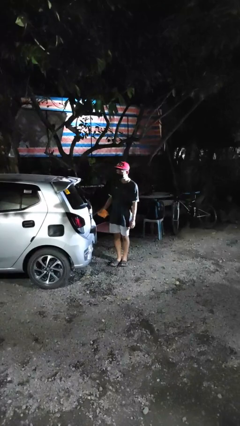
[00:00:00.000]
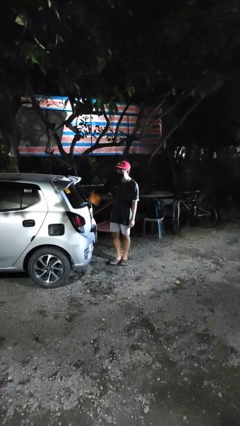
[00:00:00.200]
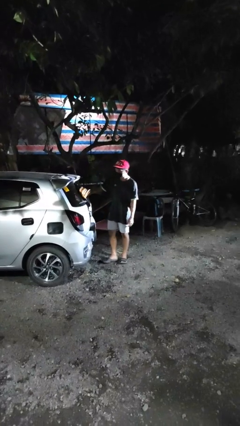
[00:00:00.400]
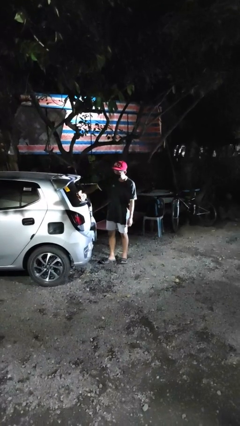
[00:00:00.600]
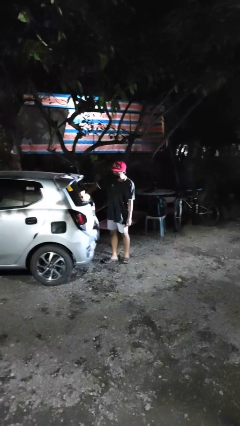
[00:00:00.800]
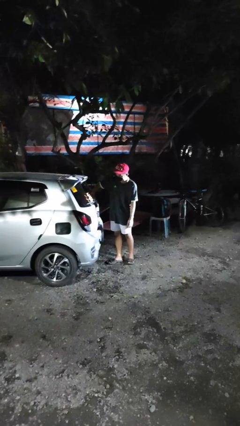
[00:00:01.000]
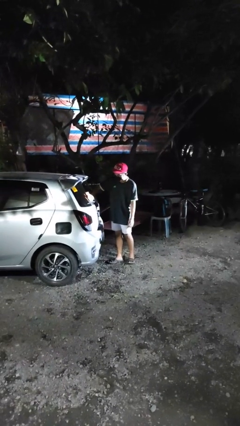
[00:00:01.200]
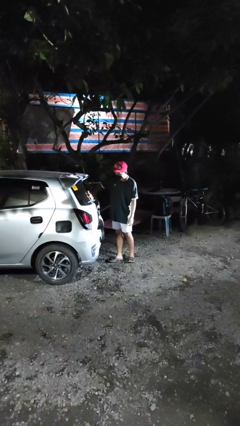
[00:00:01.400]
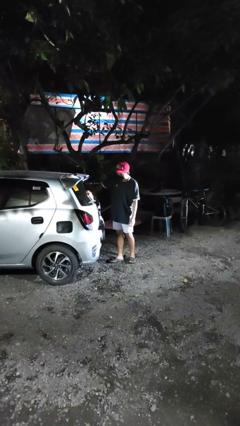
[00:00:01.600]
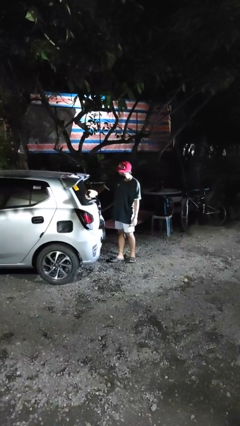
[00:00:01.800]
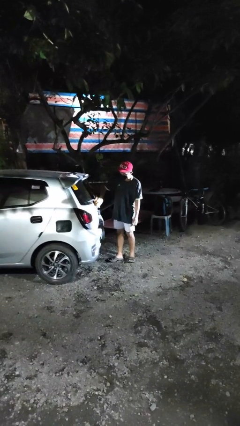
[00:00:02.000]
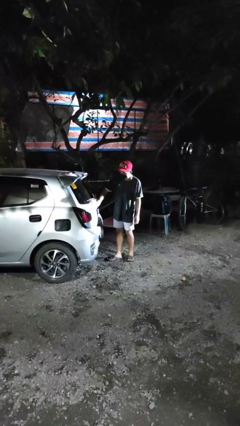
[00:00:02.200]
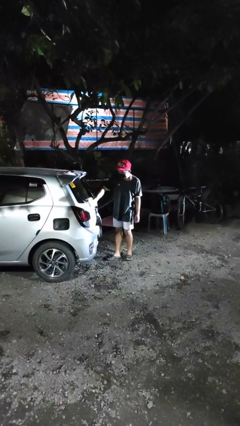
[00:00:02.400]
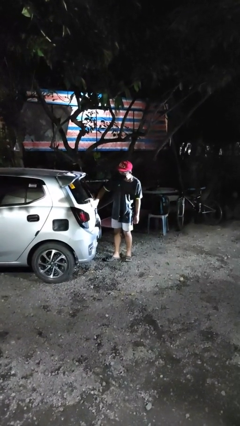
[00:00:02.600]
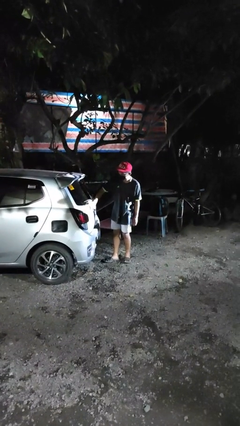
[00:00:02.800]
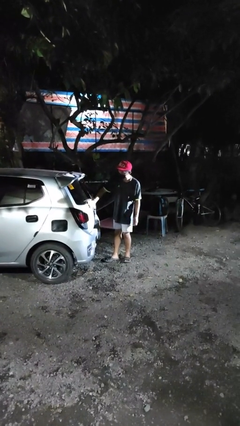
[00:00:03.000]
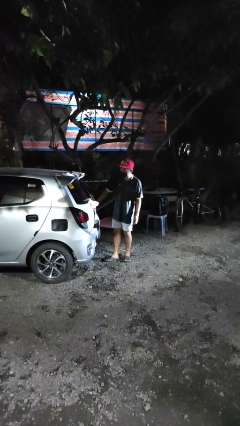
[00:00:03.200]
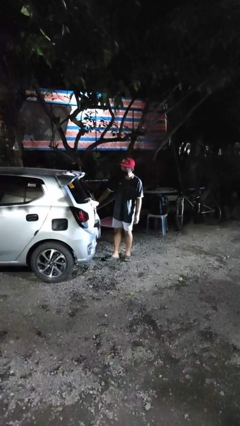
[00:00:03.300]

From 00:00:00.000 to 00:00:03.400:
person polishes car with rag

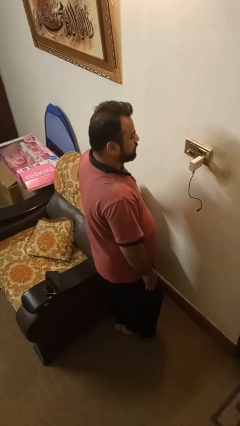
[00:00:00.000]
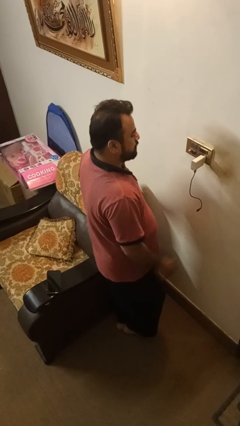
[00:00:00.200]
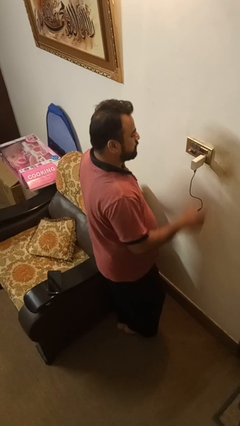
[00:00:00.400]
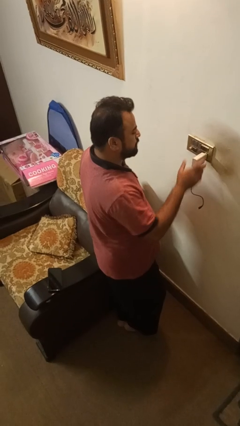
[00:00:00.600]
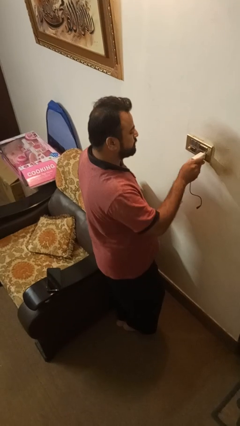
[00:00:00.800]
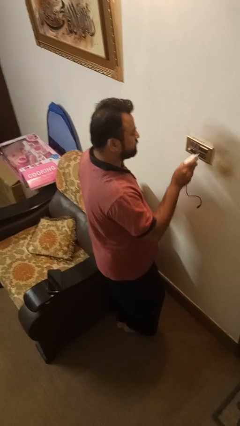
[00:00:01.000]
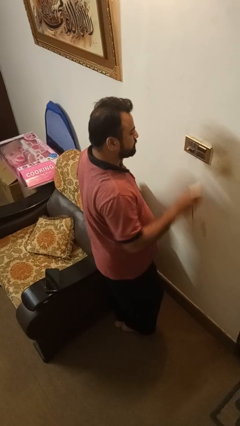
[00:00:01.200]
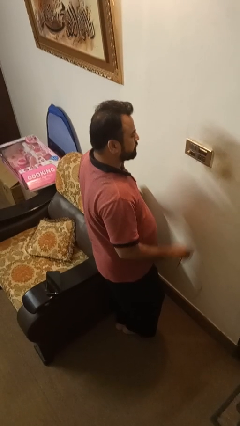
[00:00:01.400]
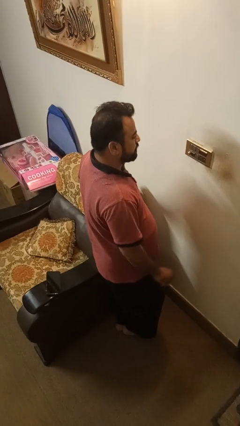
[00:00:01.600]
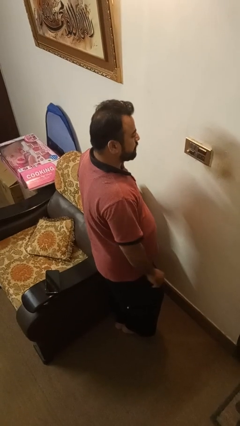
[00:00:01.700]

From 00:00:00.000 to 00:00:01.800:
person unplugs from electrical socket

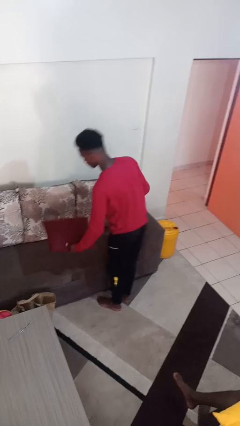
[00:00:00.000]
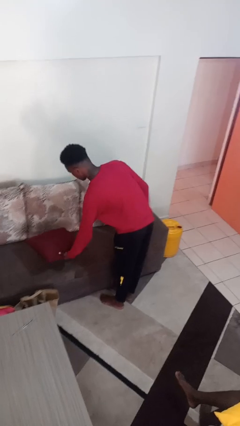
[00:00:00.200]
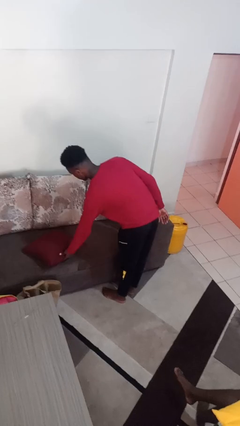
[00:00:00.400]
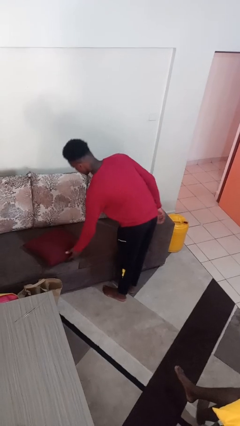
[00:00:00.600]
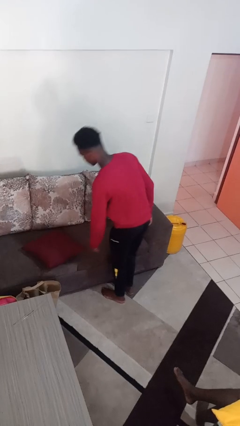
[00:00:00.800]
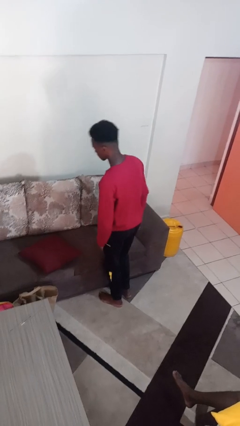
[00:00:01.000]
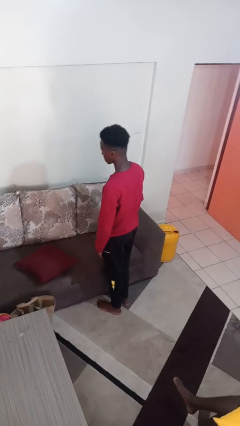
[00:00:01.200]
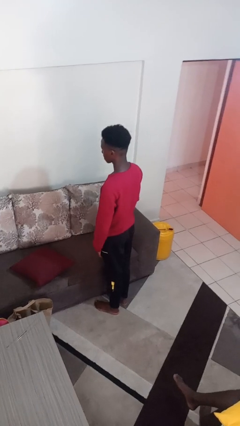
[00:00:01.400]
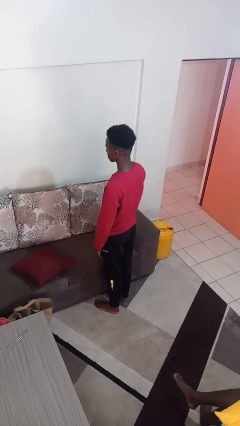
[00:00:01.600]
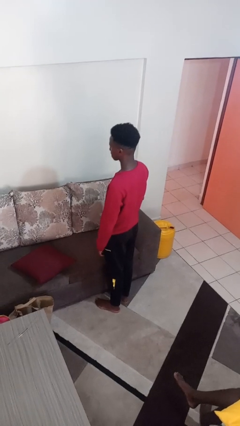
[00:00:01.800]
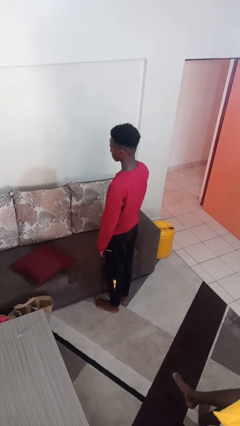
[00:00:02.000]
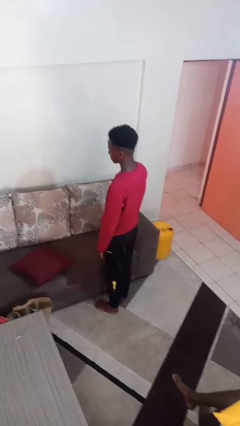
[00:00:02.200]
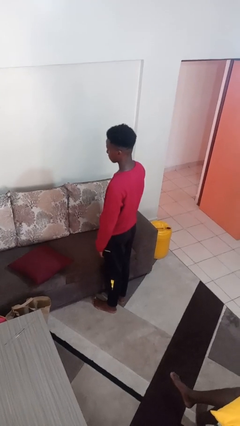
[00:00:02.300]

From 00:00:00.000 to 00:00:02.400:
person puts down object on couch

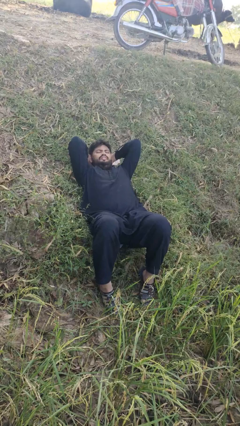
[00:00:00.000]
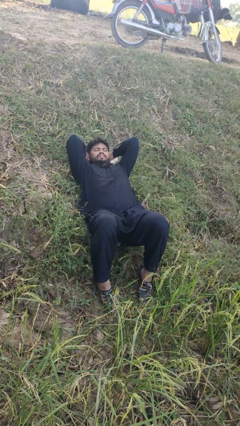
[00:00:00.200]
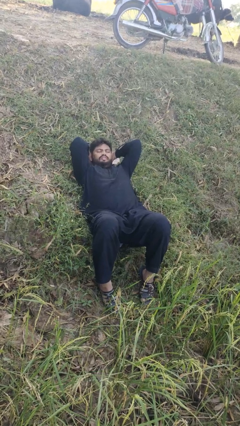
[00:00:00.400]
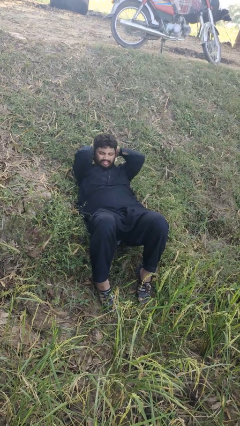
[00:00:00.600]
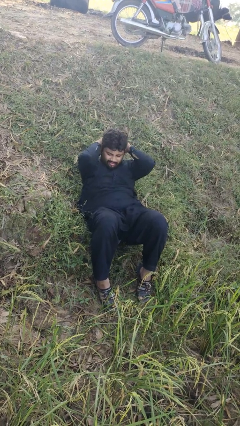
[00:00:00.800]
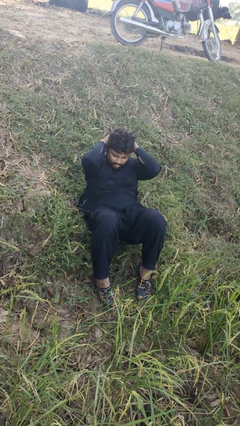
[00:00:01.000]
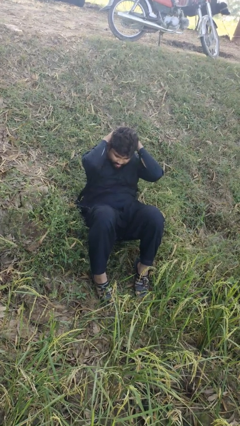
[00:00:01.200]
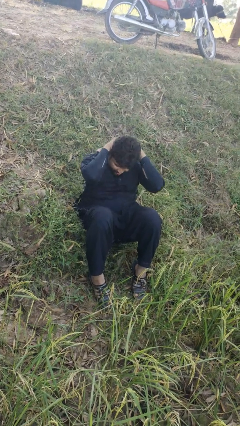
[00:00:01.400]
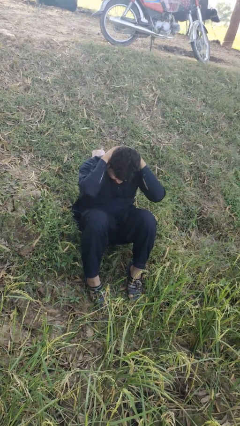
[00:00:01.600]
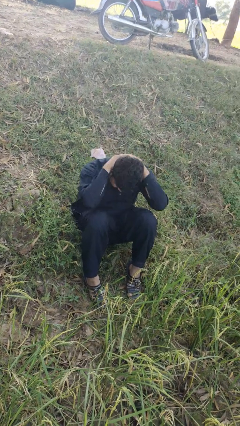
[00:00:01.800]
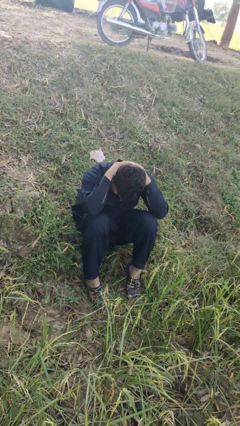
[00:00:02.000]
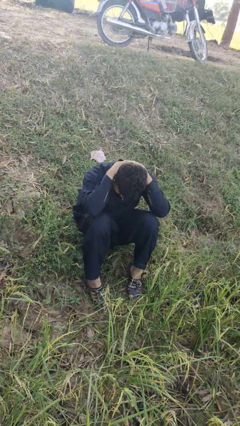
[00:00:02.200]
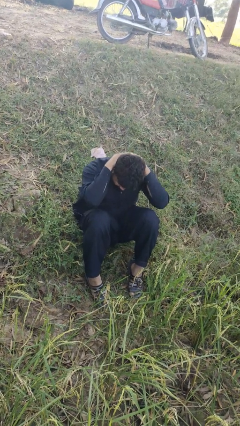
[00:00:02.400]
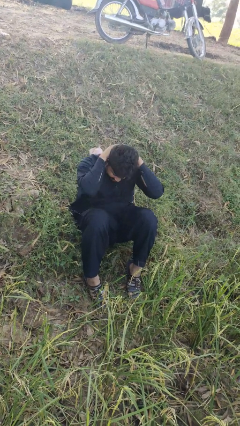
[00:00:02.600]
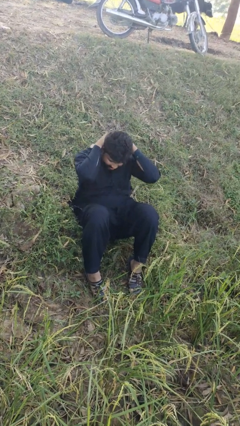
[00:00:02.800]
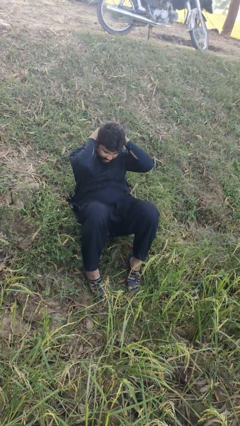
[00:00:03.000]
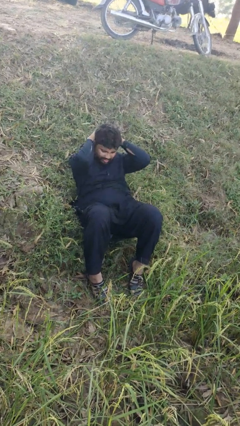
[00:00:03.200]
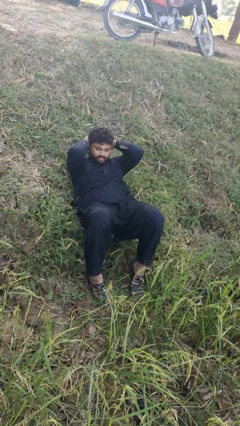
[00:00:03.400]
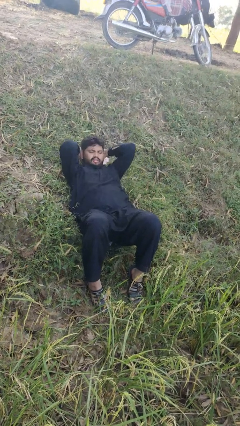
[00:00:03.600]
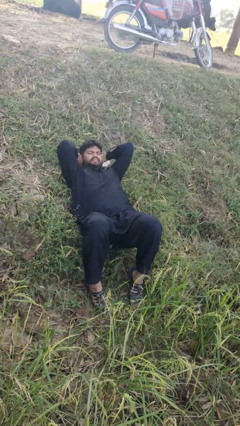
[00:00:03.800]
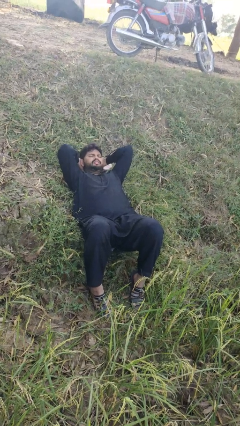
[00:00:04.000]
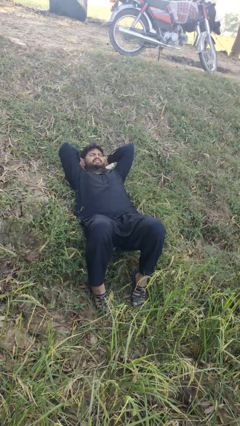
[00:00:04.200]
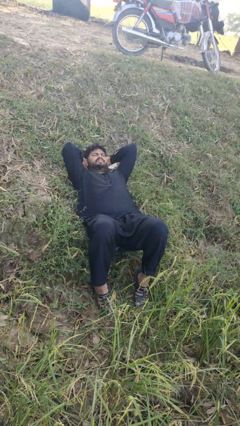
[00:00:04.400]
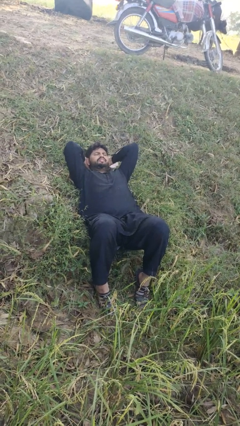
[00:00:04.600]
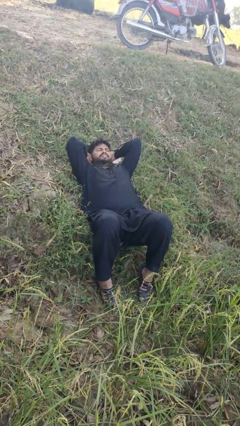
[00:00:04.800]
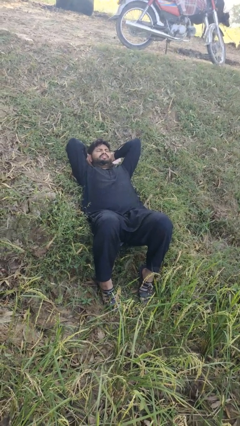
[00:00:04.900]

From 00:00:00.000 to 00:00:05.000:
person exercises with situp

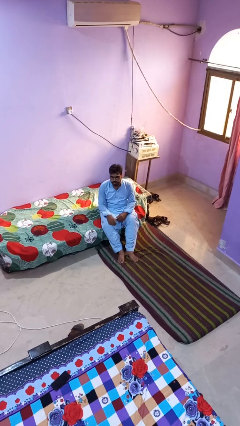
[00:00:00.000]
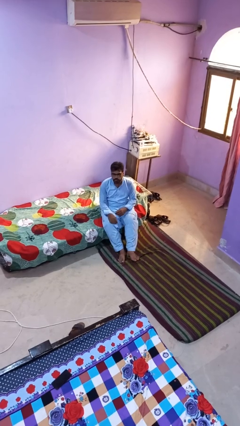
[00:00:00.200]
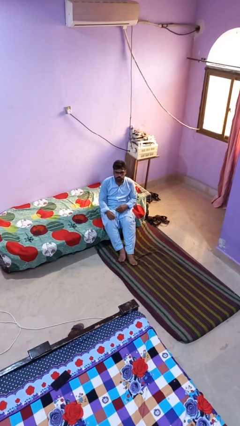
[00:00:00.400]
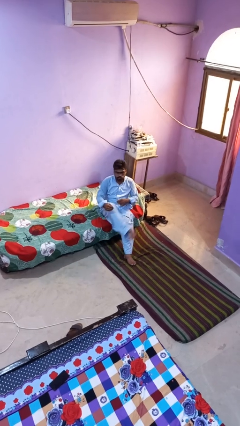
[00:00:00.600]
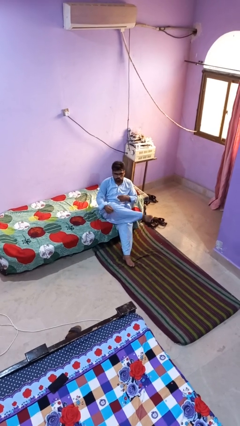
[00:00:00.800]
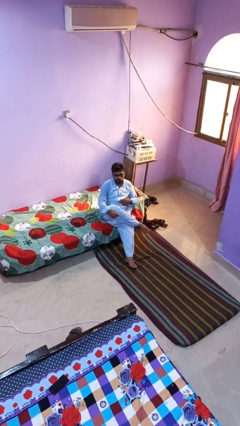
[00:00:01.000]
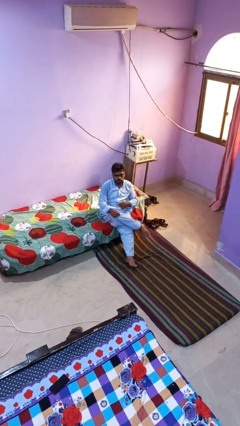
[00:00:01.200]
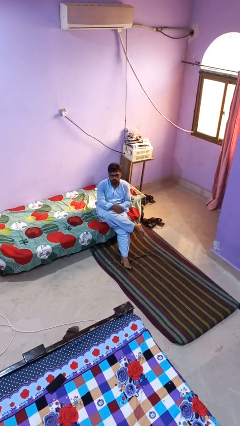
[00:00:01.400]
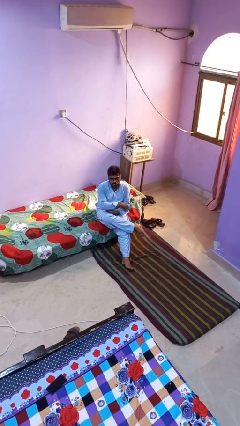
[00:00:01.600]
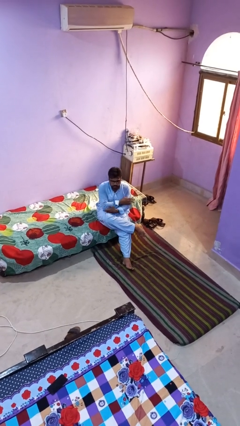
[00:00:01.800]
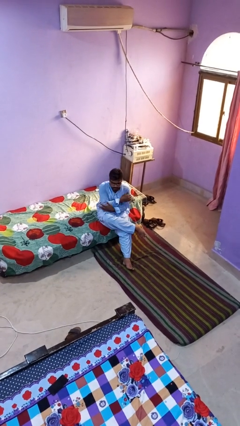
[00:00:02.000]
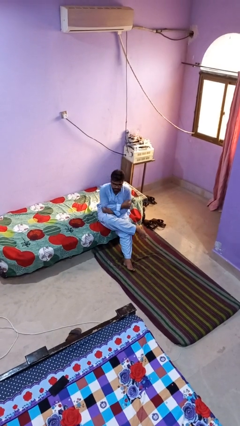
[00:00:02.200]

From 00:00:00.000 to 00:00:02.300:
person crosses legs

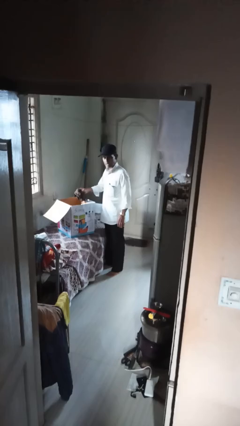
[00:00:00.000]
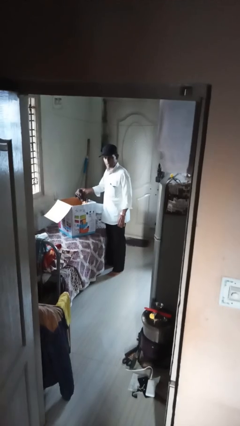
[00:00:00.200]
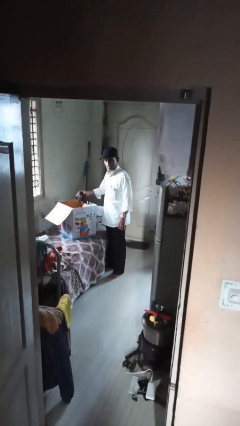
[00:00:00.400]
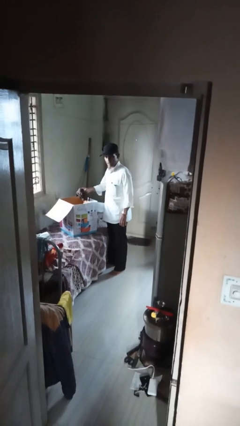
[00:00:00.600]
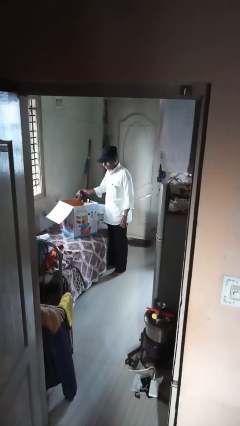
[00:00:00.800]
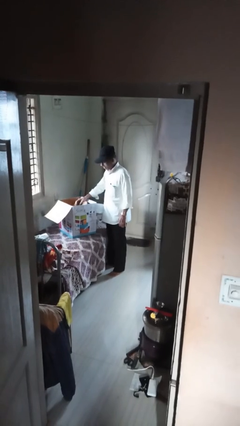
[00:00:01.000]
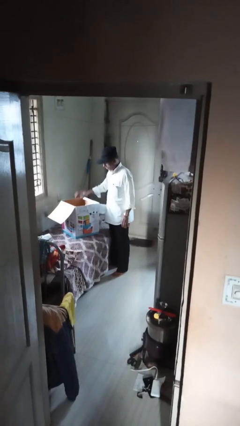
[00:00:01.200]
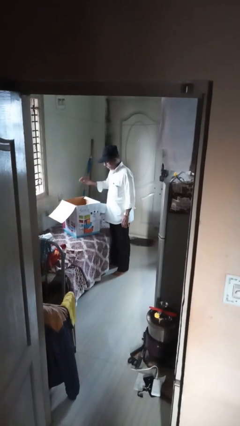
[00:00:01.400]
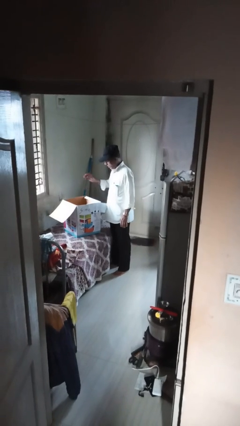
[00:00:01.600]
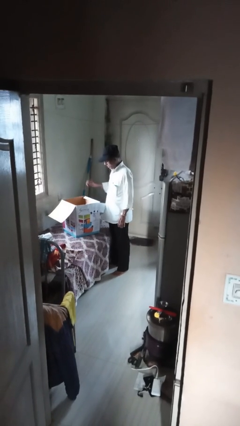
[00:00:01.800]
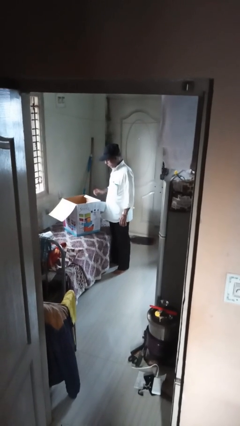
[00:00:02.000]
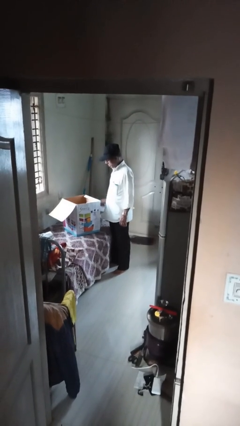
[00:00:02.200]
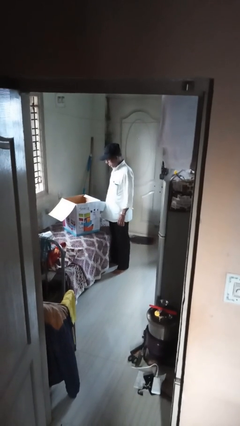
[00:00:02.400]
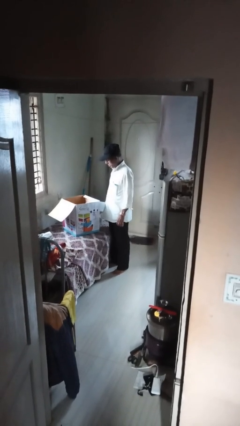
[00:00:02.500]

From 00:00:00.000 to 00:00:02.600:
person puts object into box
